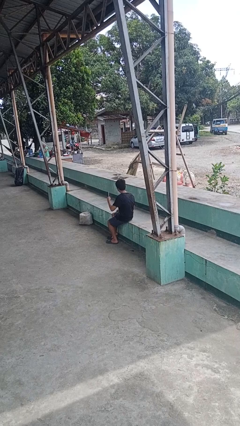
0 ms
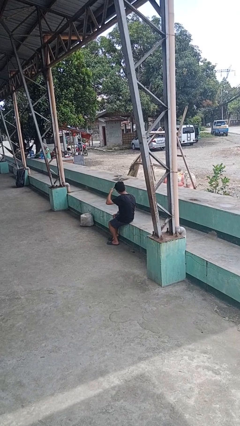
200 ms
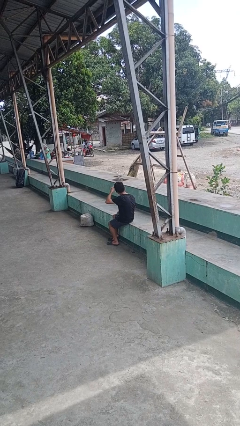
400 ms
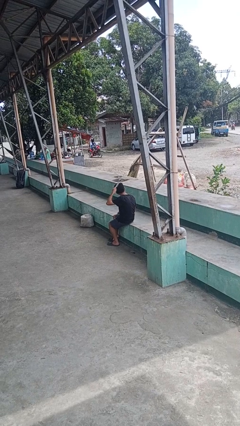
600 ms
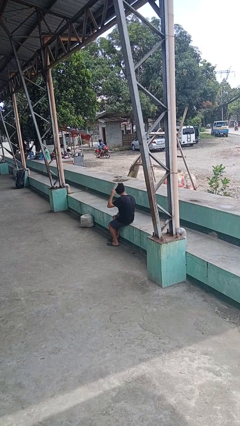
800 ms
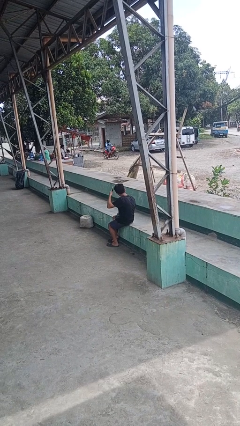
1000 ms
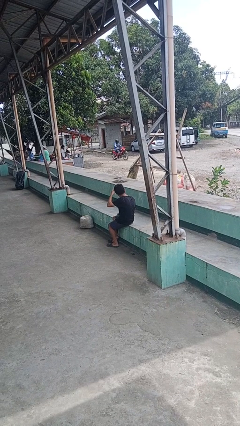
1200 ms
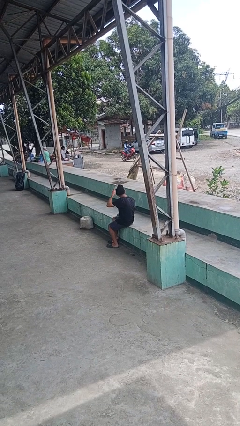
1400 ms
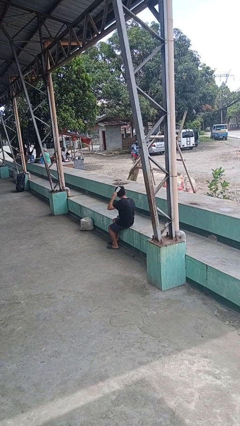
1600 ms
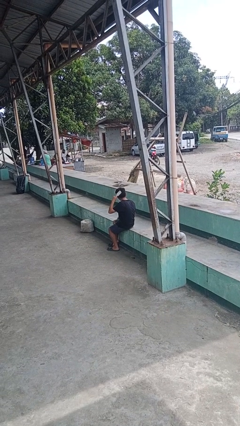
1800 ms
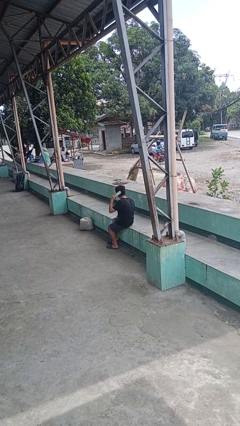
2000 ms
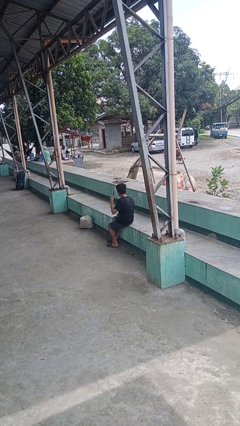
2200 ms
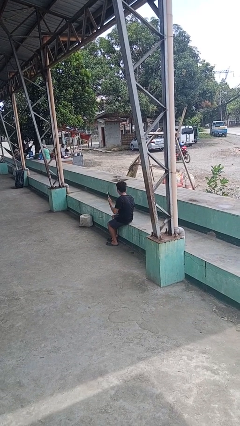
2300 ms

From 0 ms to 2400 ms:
person brushes hair

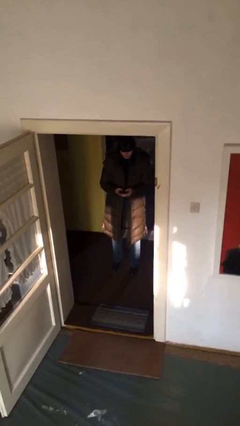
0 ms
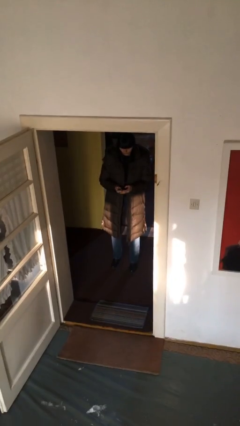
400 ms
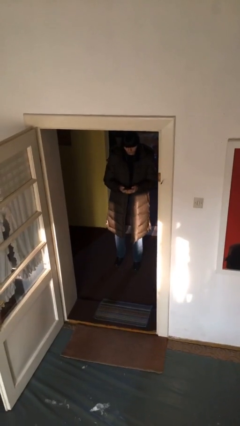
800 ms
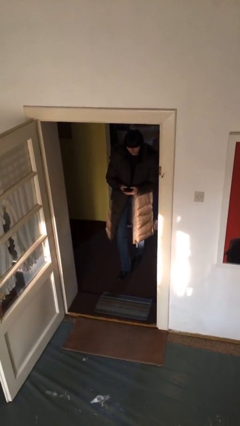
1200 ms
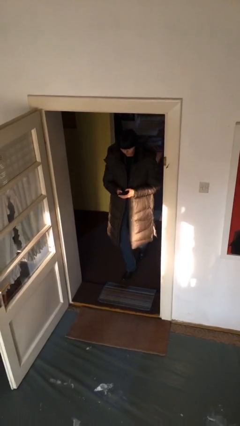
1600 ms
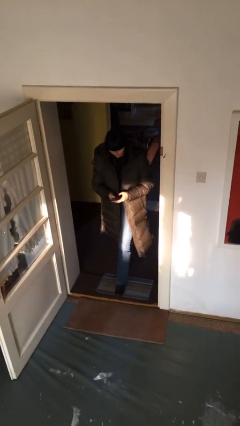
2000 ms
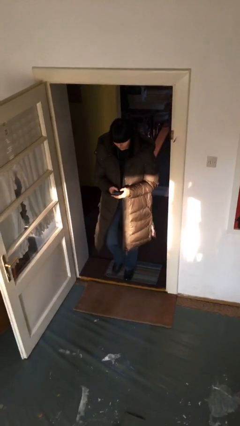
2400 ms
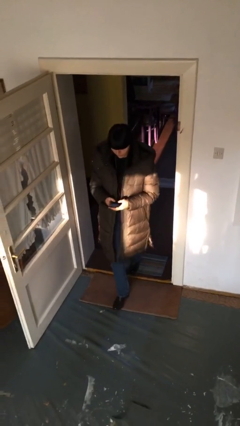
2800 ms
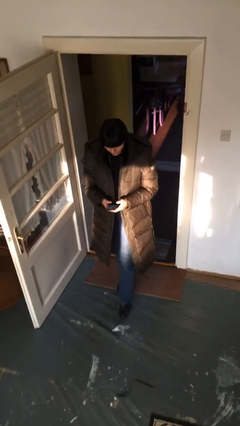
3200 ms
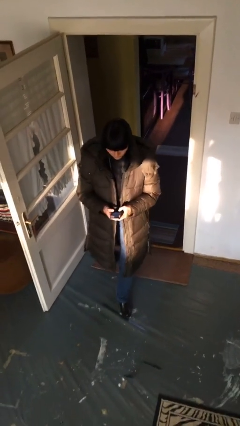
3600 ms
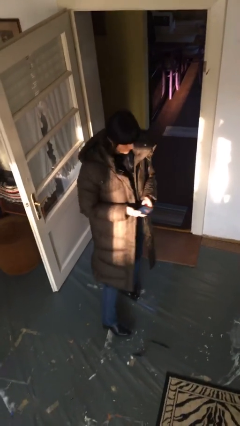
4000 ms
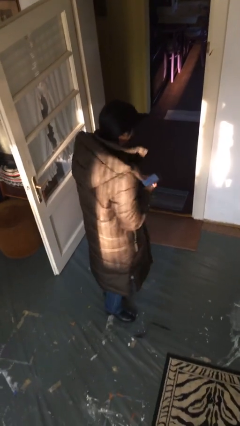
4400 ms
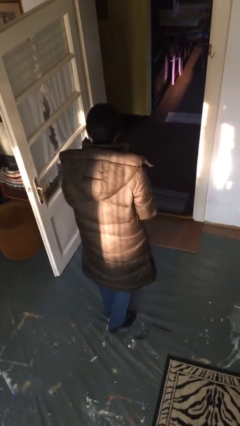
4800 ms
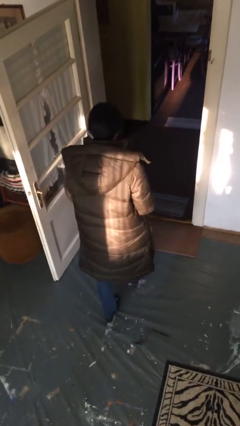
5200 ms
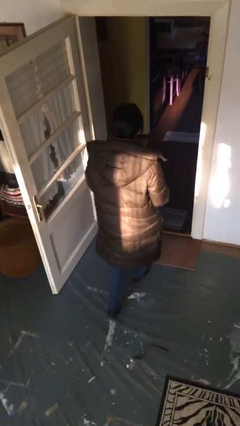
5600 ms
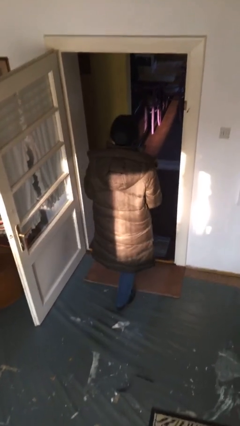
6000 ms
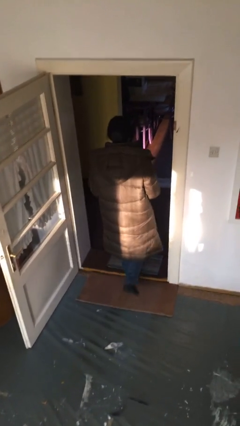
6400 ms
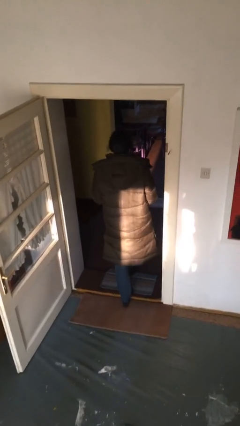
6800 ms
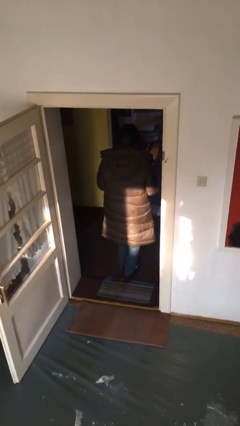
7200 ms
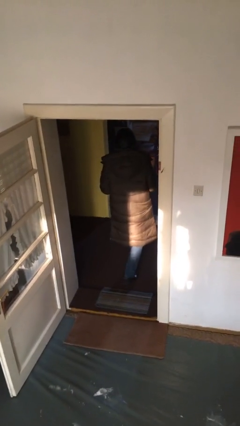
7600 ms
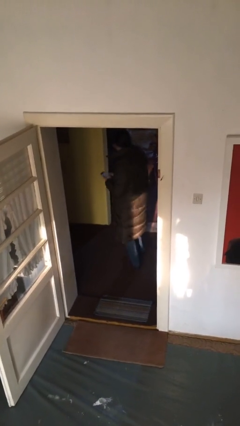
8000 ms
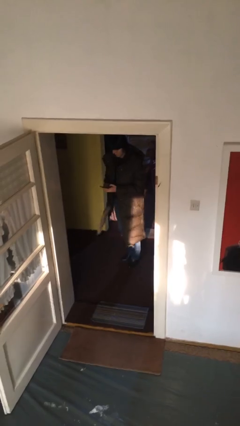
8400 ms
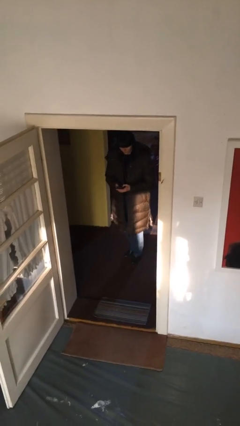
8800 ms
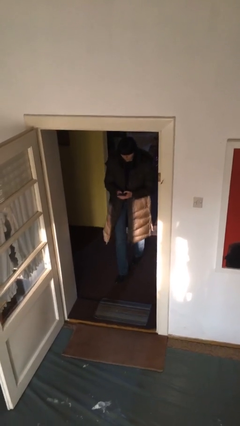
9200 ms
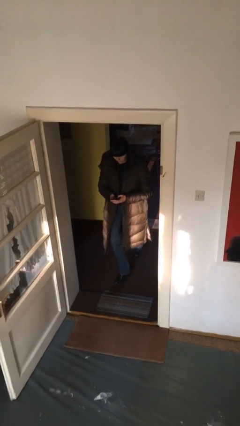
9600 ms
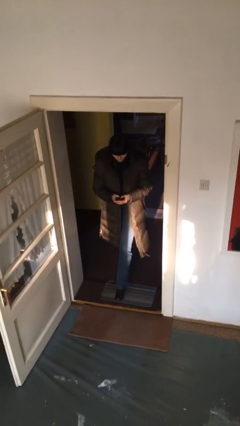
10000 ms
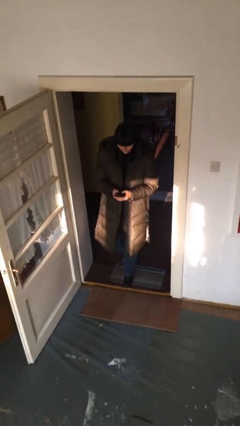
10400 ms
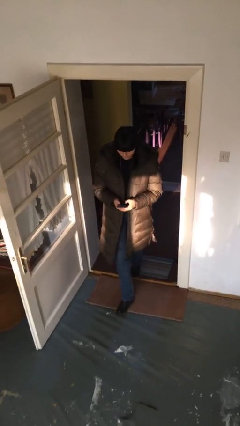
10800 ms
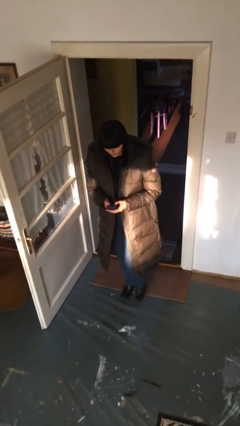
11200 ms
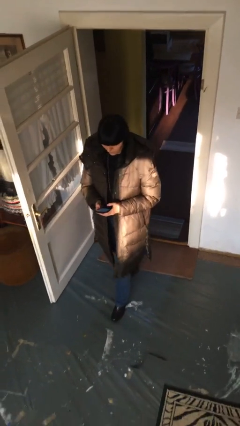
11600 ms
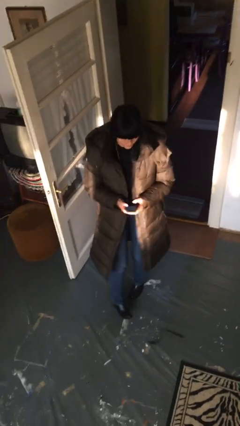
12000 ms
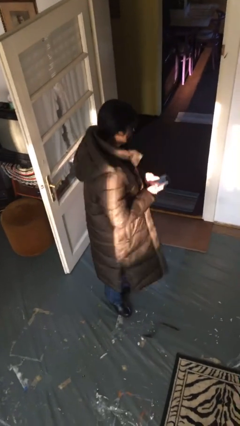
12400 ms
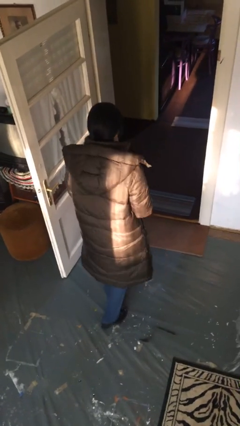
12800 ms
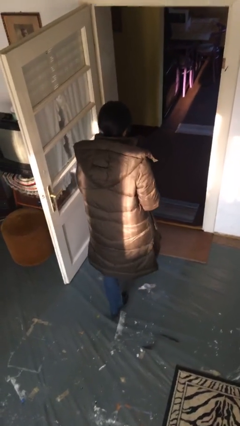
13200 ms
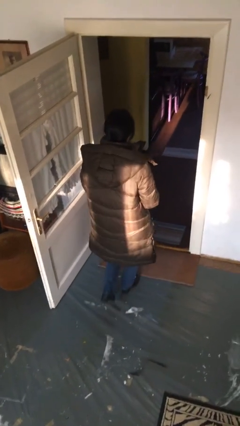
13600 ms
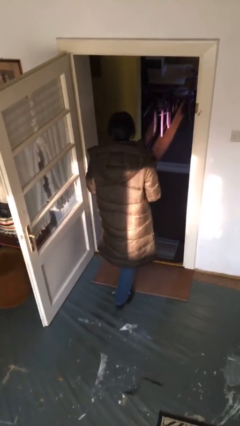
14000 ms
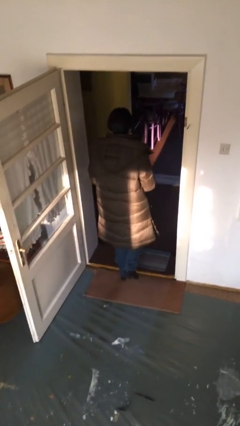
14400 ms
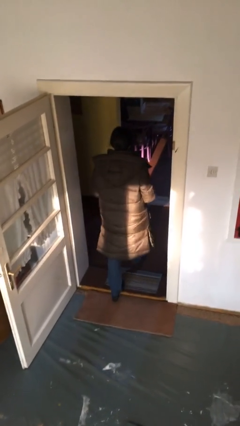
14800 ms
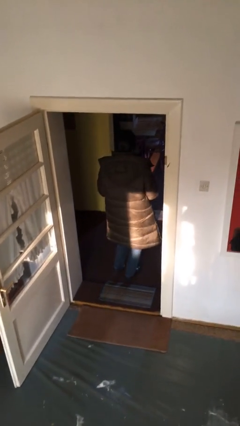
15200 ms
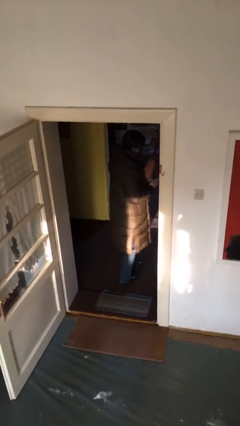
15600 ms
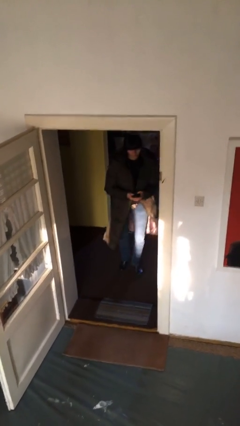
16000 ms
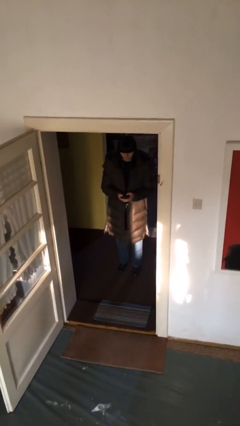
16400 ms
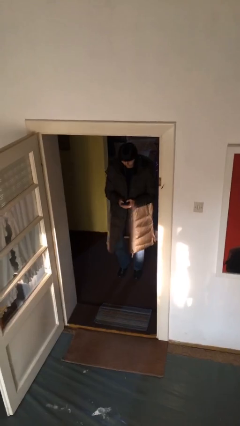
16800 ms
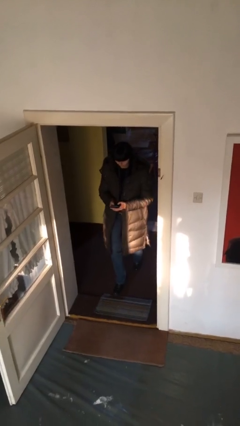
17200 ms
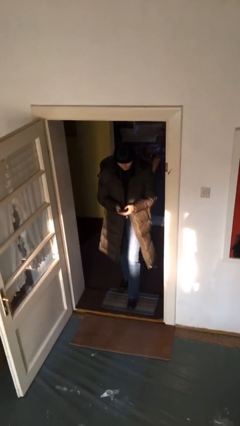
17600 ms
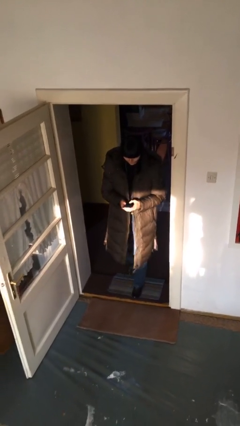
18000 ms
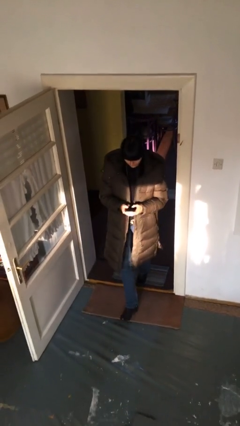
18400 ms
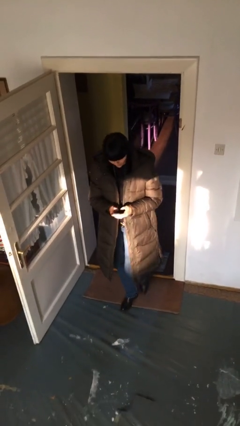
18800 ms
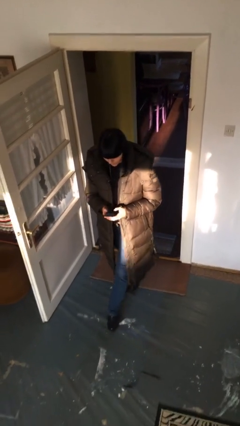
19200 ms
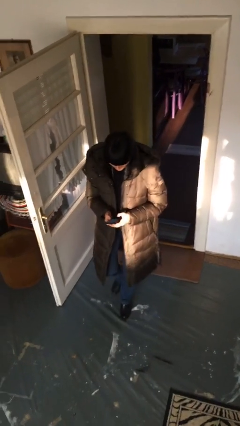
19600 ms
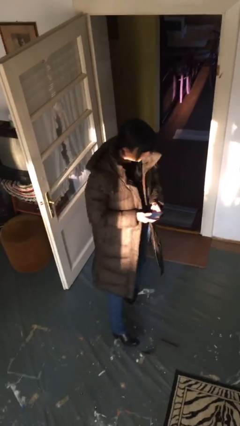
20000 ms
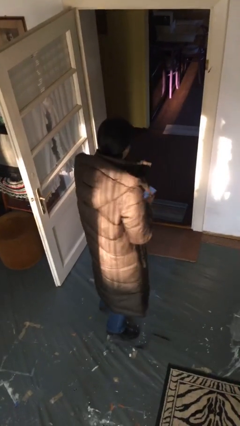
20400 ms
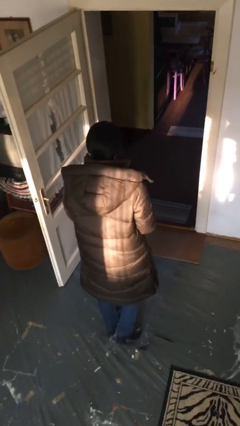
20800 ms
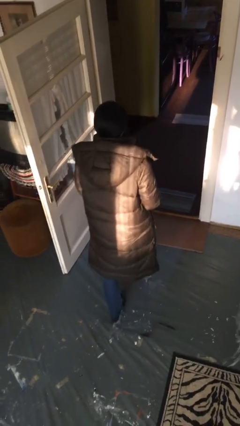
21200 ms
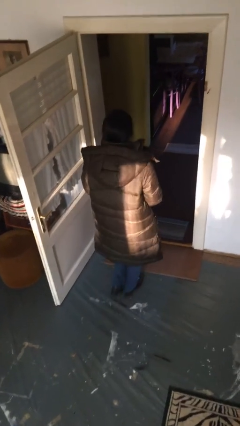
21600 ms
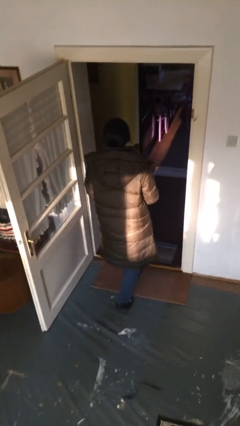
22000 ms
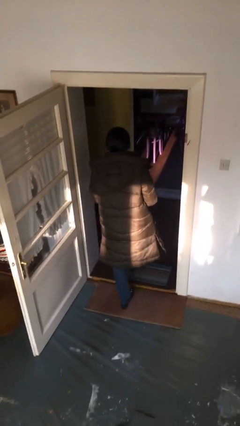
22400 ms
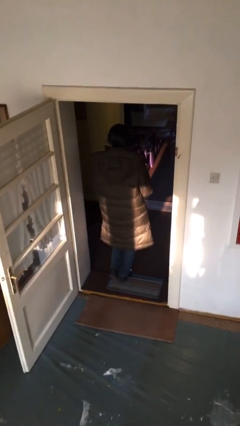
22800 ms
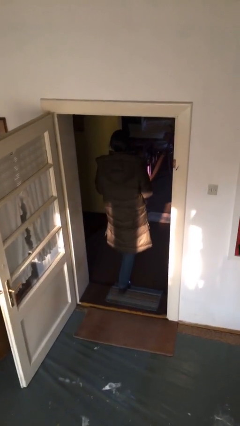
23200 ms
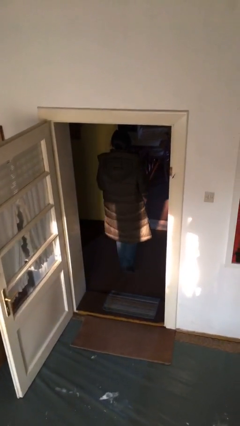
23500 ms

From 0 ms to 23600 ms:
person texts on phone

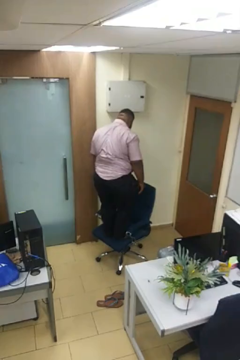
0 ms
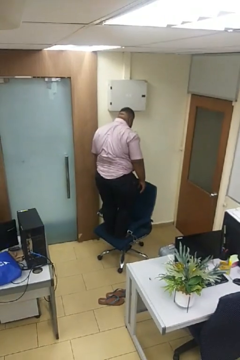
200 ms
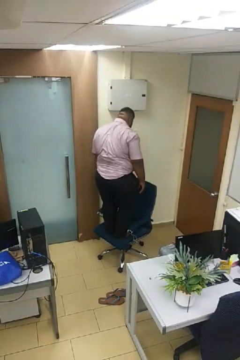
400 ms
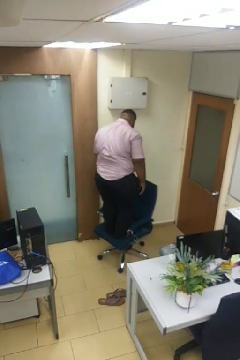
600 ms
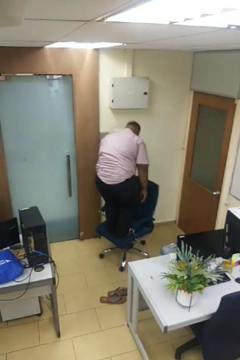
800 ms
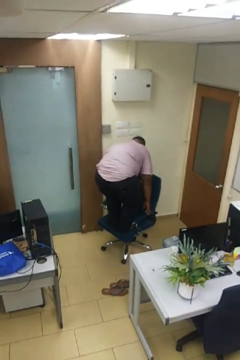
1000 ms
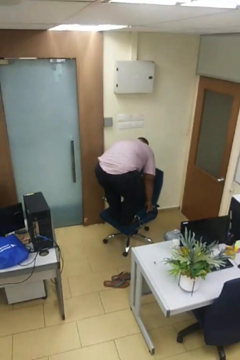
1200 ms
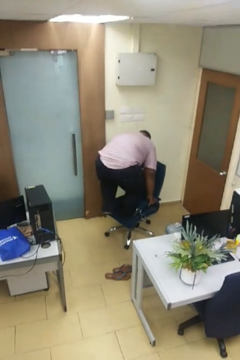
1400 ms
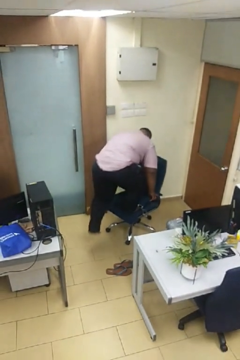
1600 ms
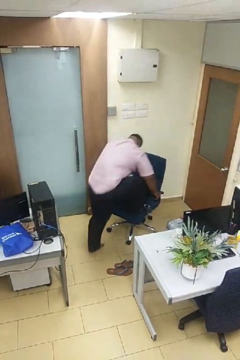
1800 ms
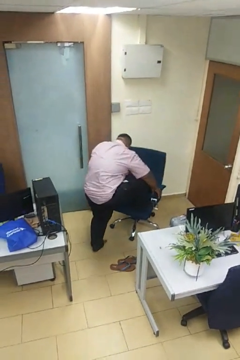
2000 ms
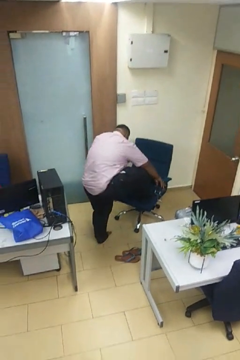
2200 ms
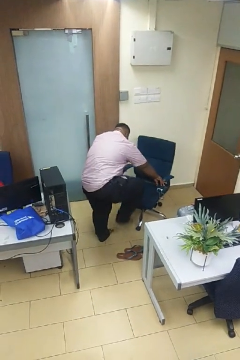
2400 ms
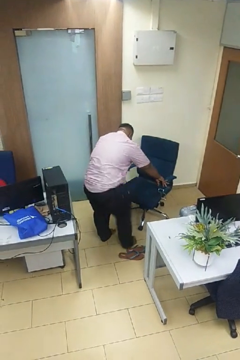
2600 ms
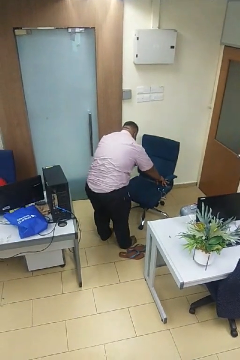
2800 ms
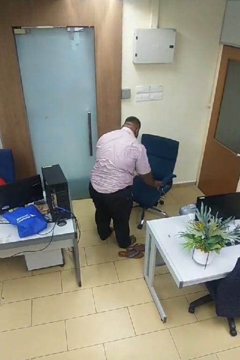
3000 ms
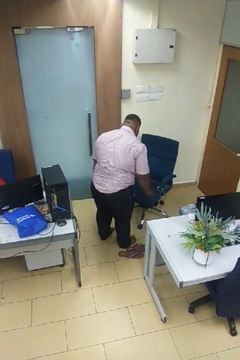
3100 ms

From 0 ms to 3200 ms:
person climbs off chair

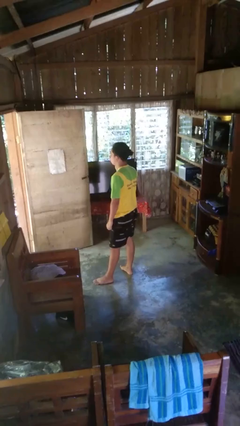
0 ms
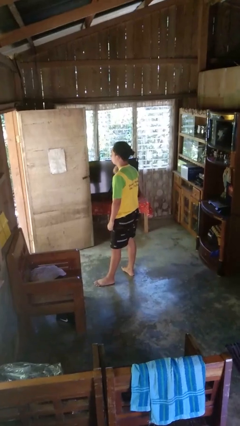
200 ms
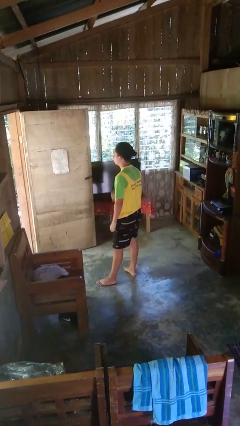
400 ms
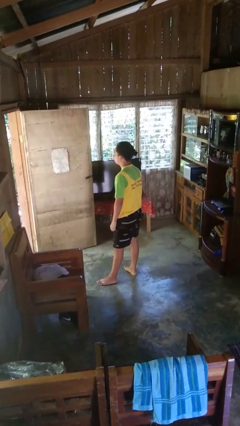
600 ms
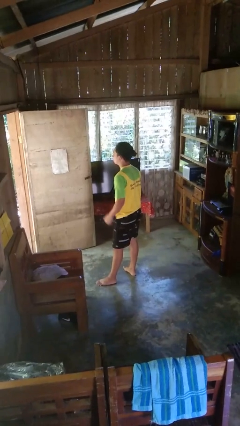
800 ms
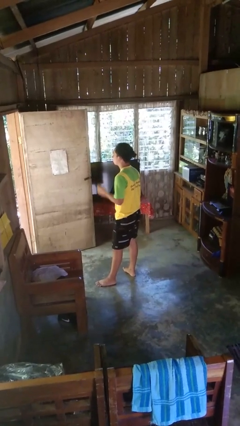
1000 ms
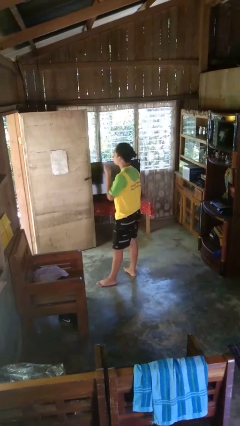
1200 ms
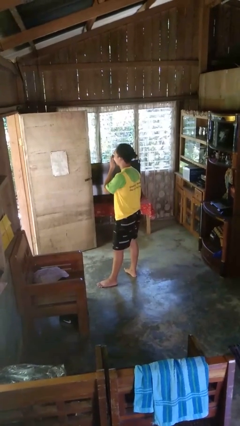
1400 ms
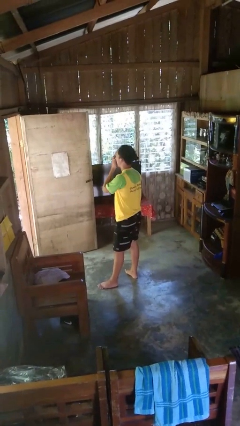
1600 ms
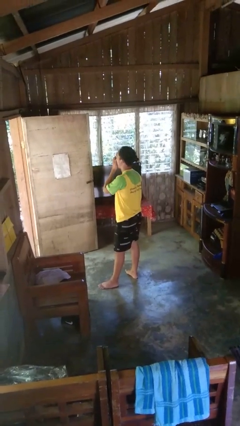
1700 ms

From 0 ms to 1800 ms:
person yawns
